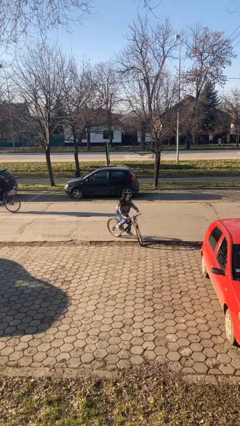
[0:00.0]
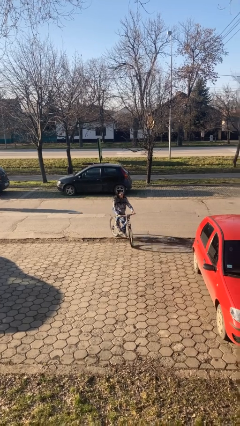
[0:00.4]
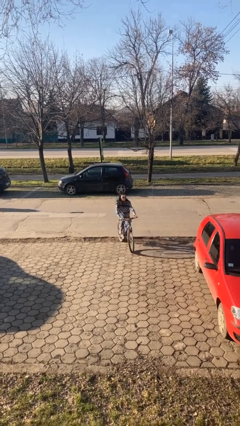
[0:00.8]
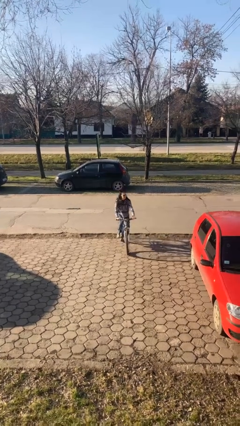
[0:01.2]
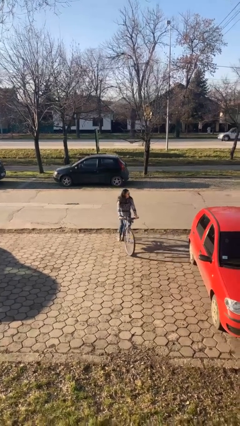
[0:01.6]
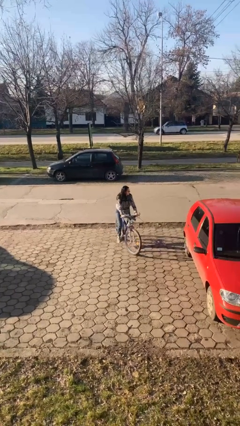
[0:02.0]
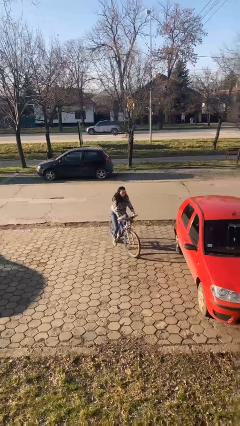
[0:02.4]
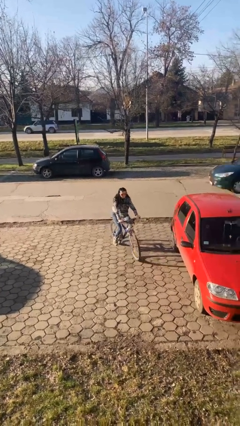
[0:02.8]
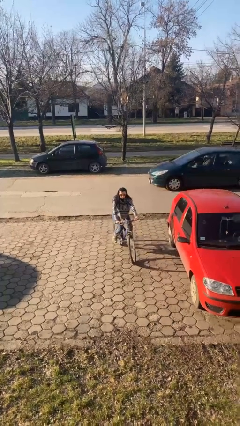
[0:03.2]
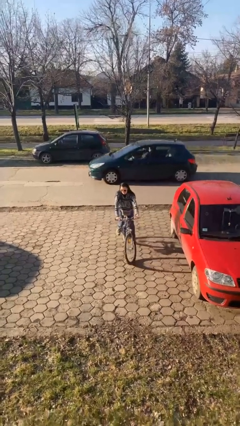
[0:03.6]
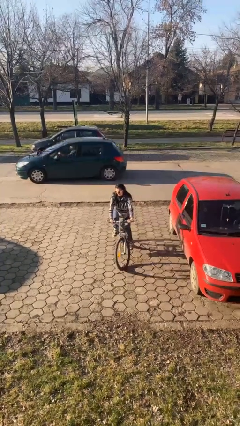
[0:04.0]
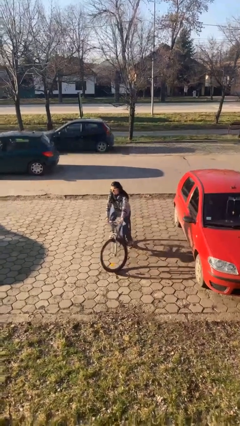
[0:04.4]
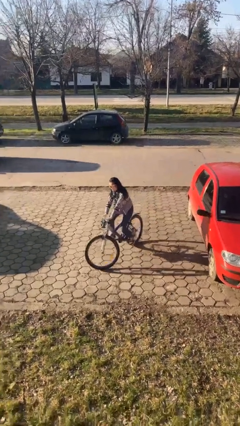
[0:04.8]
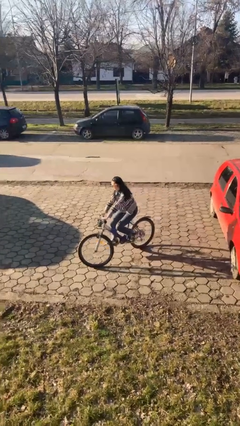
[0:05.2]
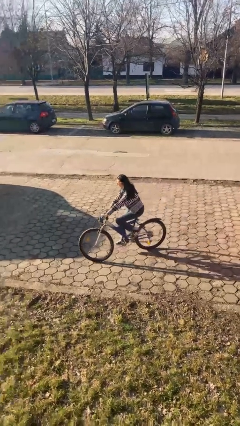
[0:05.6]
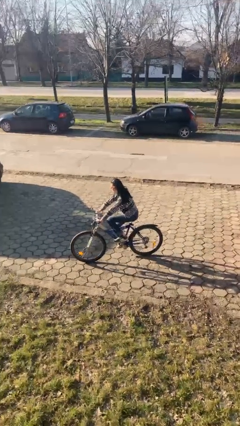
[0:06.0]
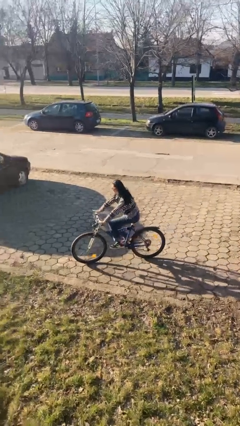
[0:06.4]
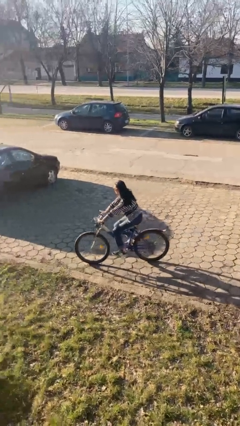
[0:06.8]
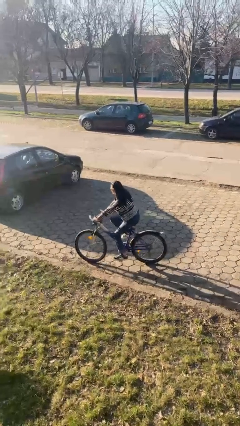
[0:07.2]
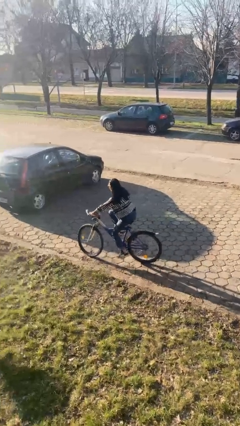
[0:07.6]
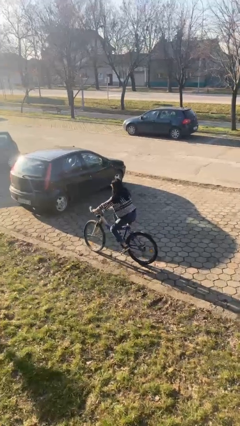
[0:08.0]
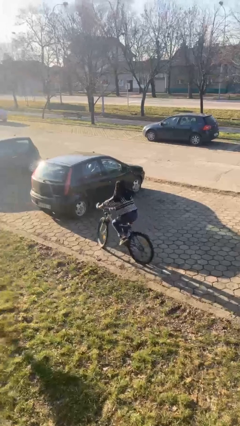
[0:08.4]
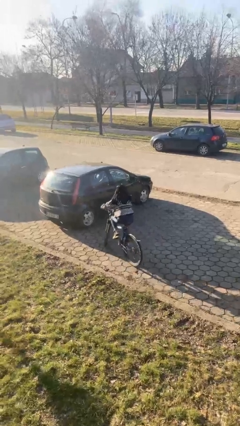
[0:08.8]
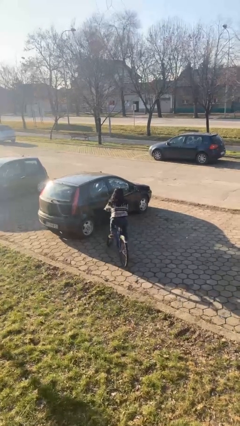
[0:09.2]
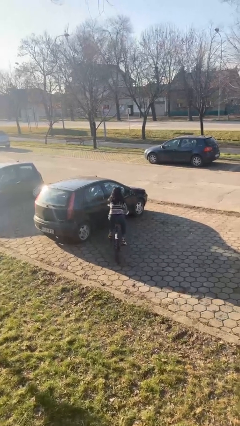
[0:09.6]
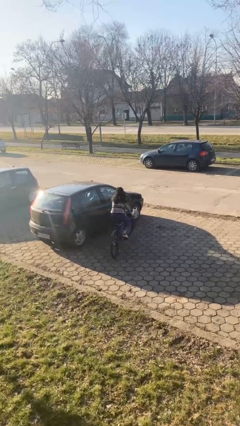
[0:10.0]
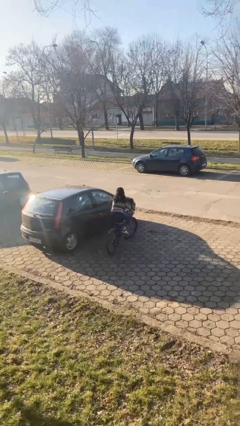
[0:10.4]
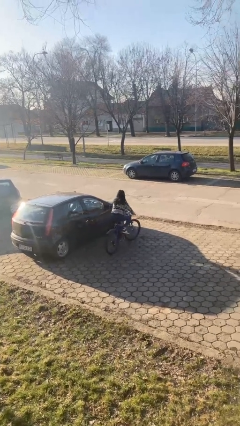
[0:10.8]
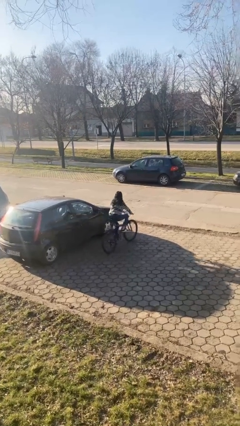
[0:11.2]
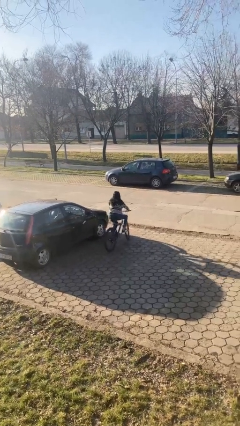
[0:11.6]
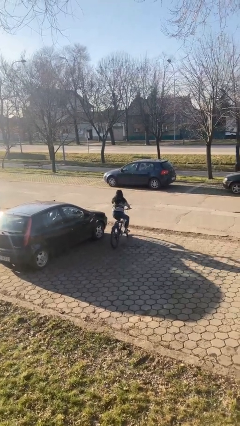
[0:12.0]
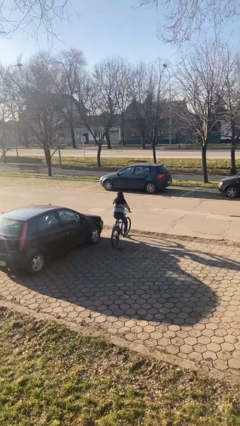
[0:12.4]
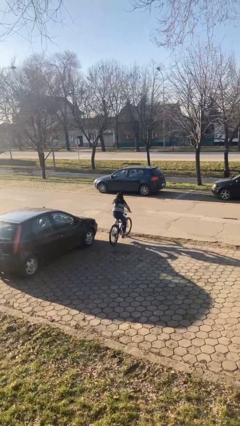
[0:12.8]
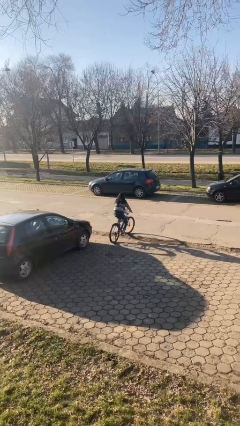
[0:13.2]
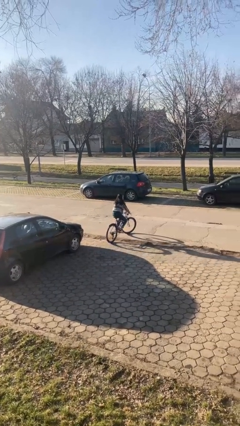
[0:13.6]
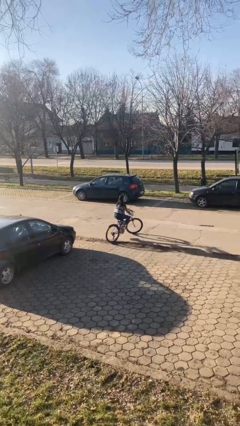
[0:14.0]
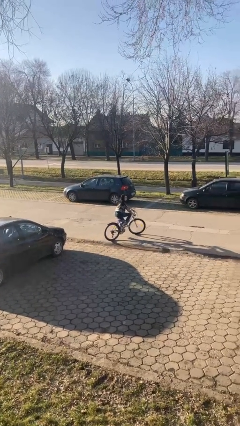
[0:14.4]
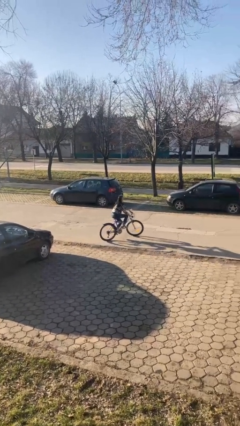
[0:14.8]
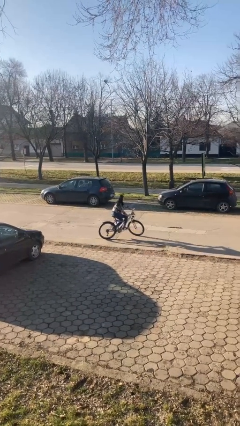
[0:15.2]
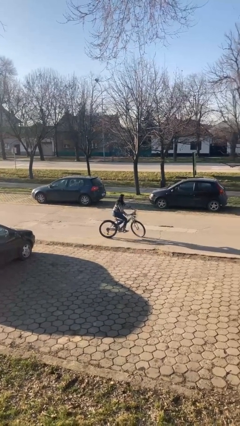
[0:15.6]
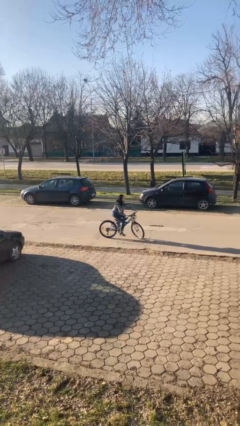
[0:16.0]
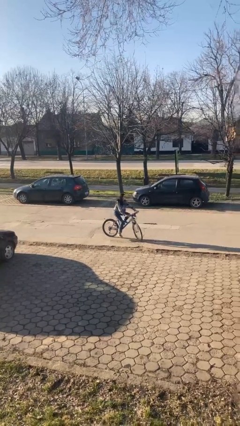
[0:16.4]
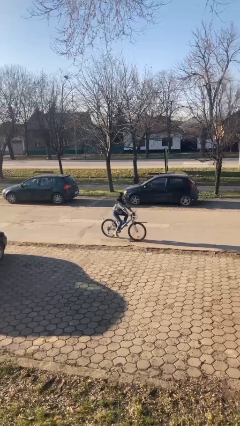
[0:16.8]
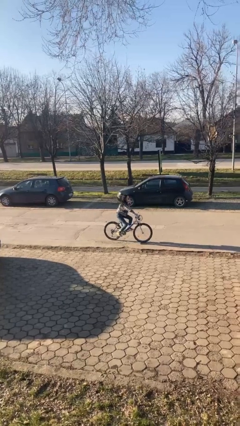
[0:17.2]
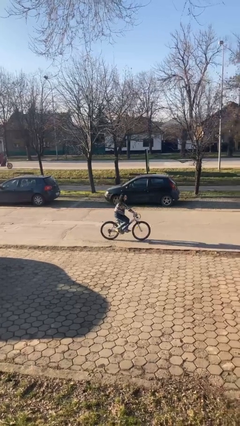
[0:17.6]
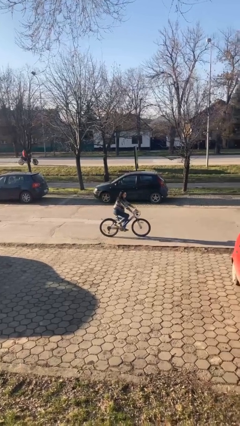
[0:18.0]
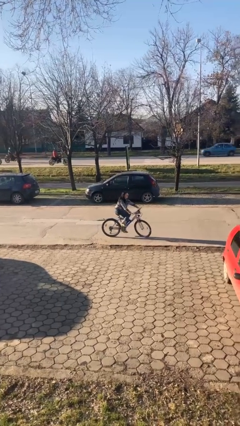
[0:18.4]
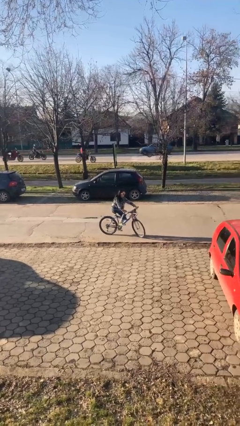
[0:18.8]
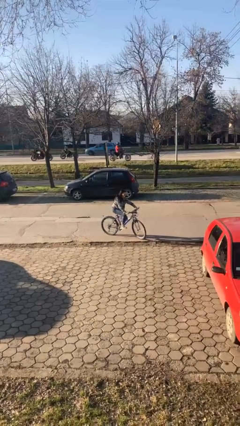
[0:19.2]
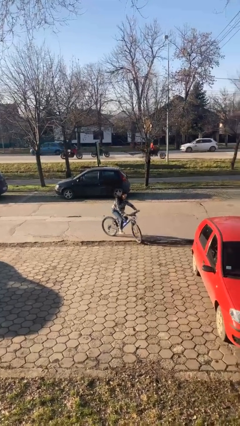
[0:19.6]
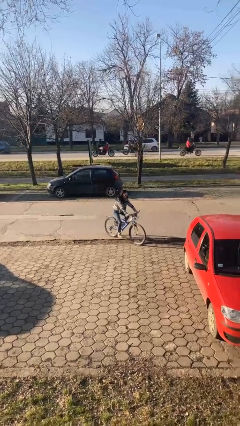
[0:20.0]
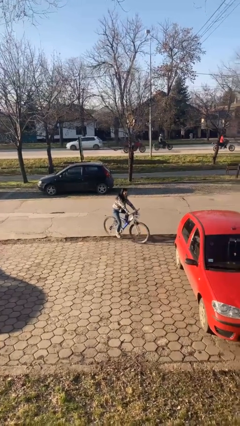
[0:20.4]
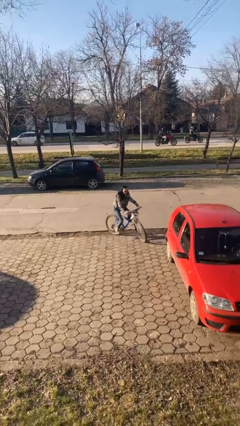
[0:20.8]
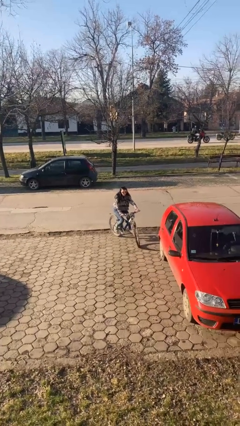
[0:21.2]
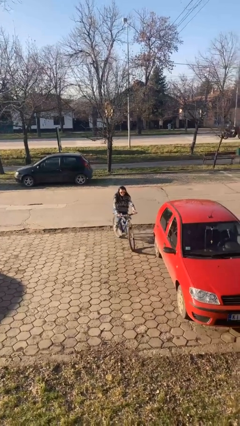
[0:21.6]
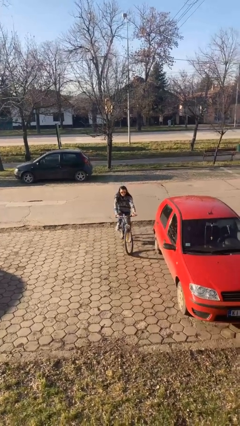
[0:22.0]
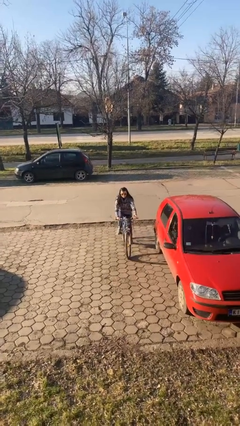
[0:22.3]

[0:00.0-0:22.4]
person rides bicycle

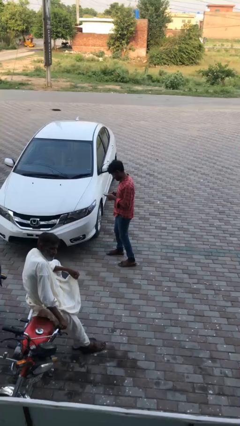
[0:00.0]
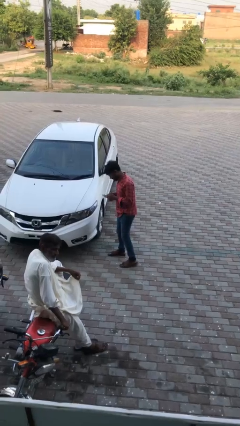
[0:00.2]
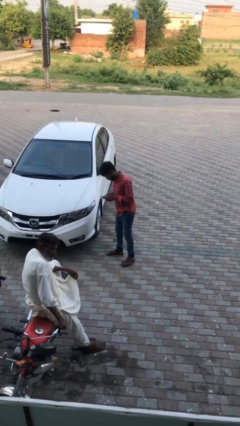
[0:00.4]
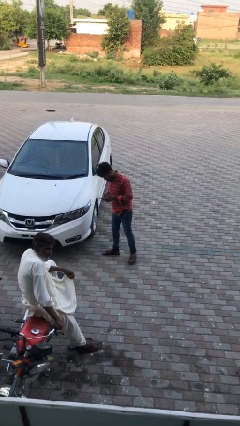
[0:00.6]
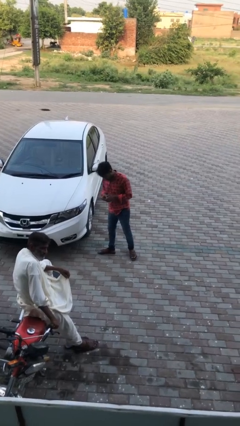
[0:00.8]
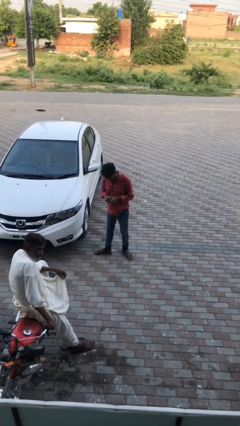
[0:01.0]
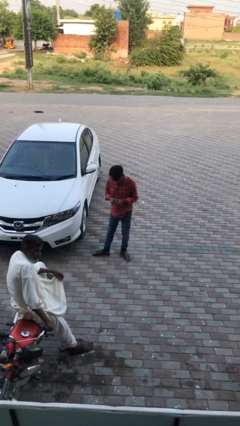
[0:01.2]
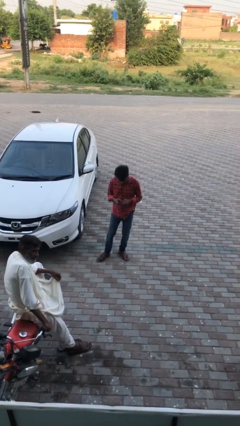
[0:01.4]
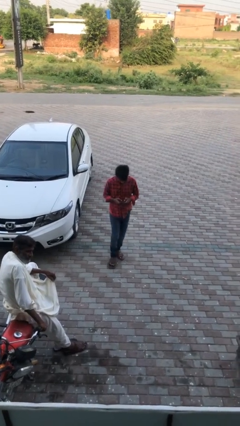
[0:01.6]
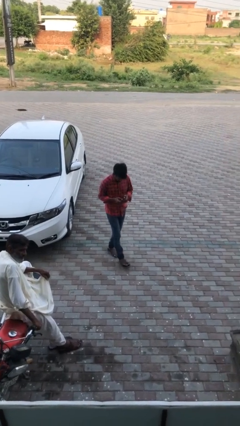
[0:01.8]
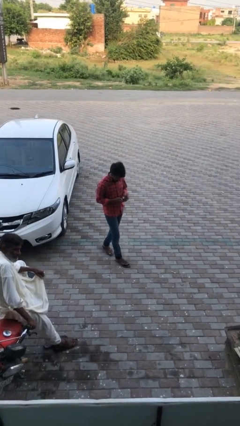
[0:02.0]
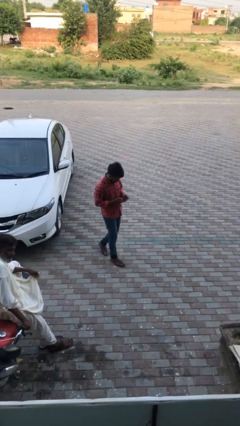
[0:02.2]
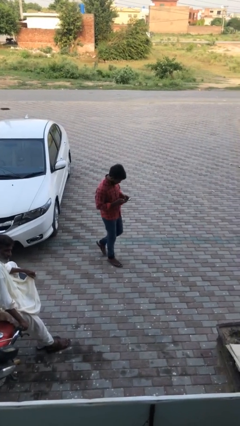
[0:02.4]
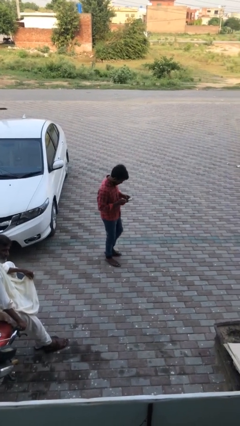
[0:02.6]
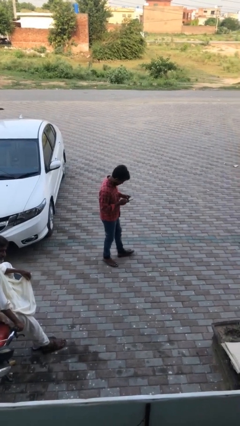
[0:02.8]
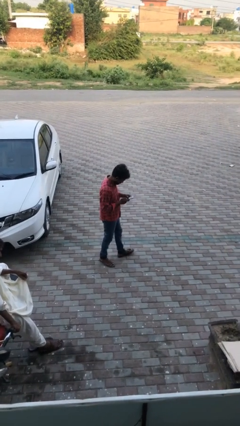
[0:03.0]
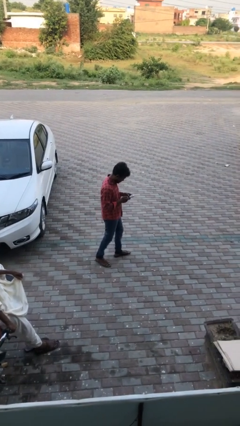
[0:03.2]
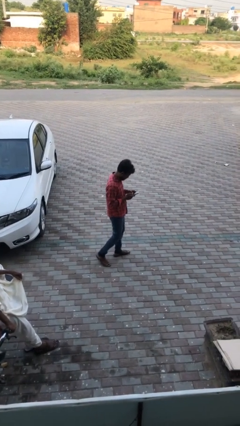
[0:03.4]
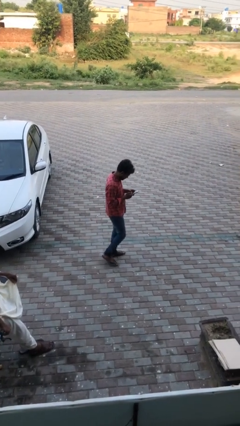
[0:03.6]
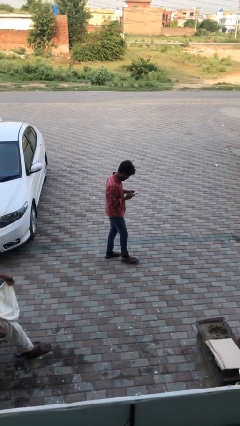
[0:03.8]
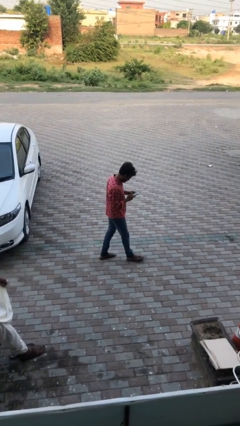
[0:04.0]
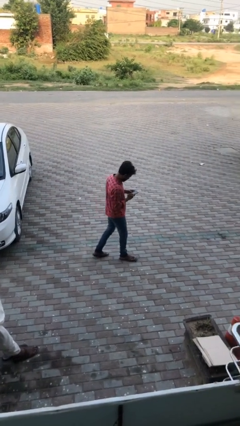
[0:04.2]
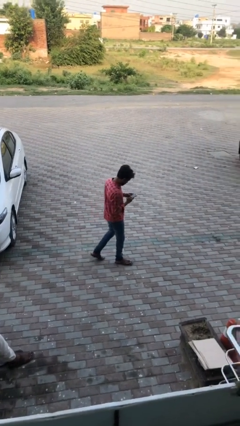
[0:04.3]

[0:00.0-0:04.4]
person texts on phone

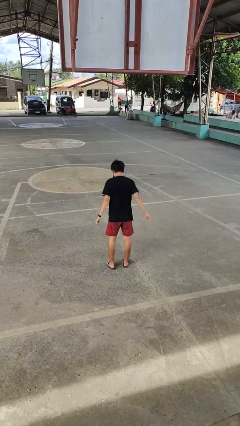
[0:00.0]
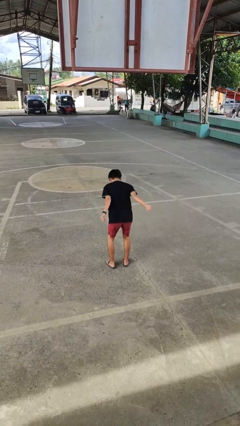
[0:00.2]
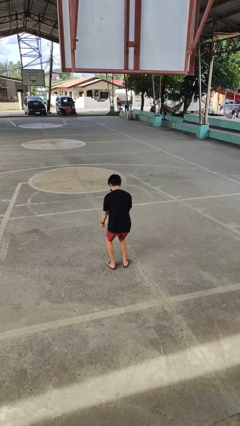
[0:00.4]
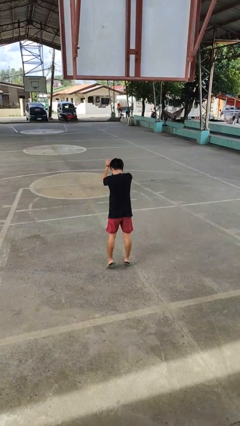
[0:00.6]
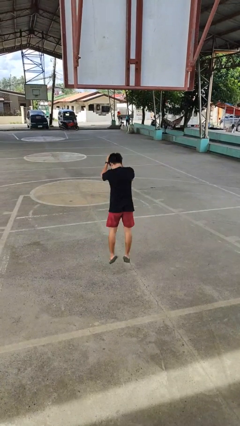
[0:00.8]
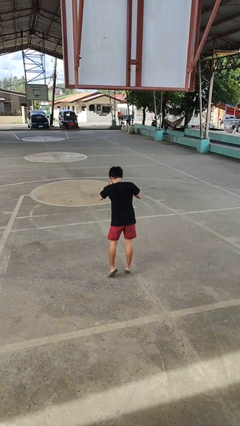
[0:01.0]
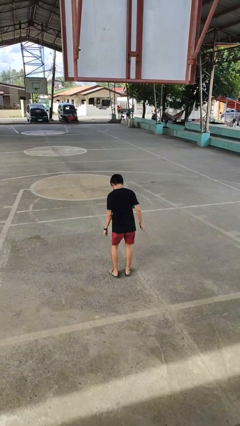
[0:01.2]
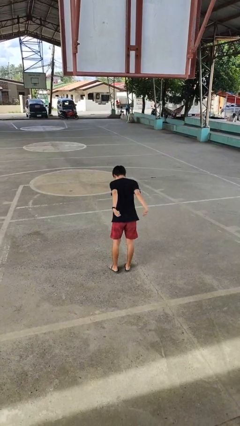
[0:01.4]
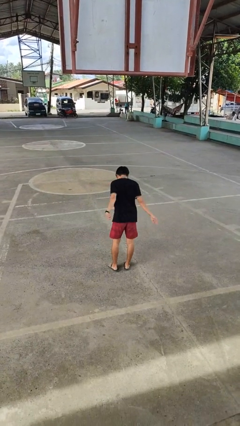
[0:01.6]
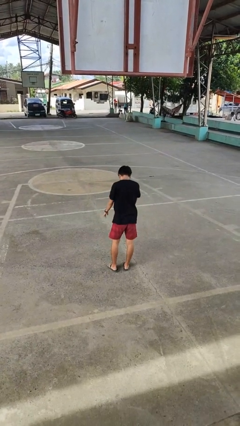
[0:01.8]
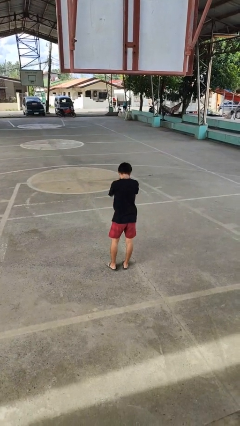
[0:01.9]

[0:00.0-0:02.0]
person jumps

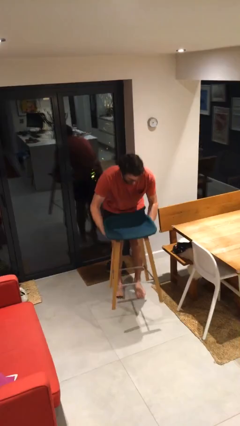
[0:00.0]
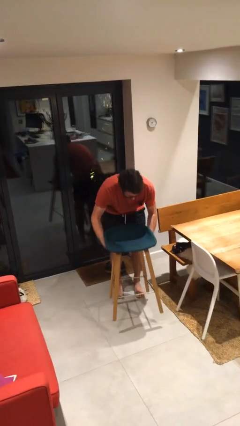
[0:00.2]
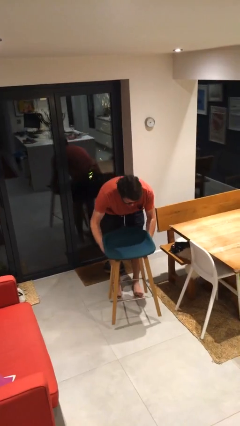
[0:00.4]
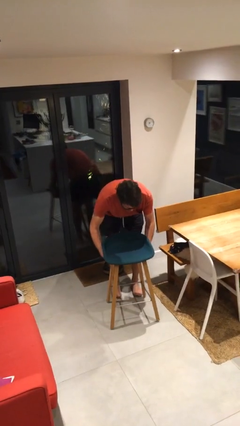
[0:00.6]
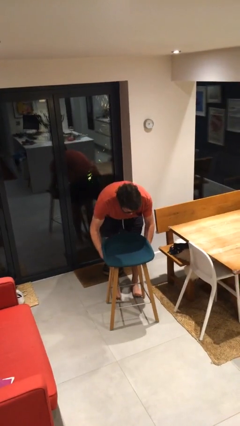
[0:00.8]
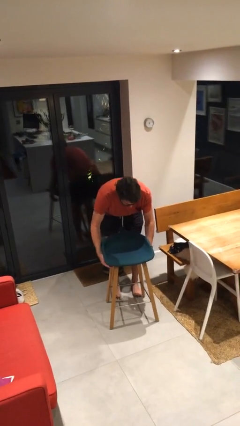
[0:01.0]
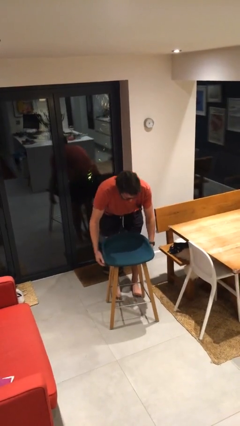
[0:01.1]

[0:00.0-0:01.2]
person puts down object on floor
